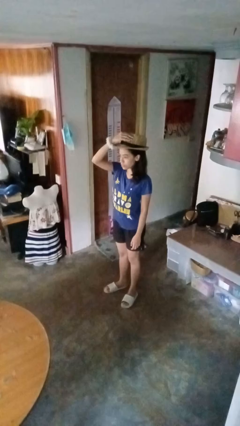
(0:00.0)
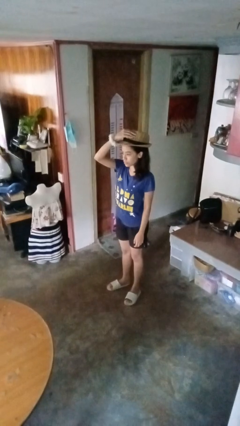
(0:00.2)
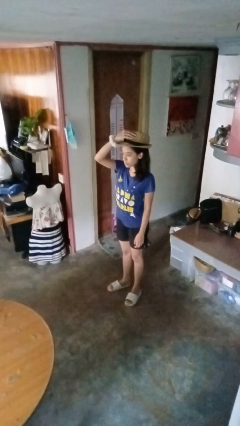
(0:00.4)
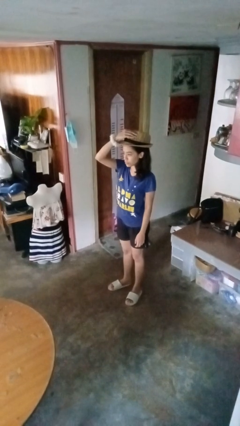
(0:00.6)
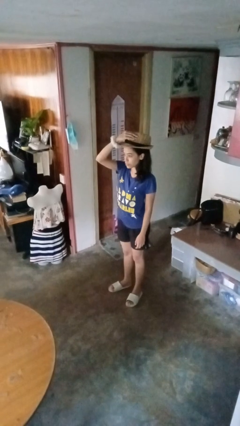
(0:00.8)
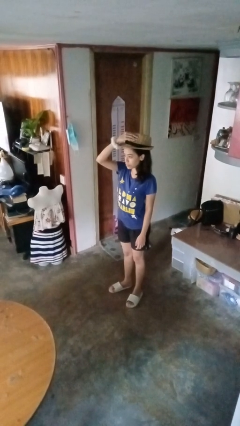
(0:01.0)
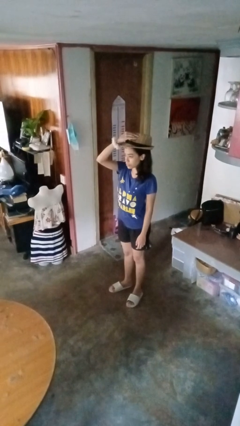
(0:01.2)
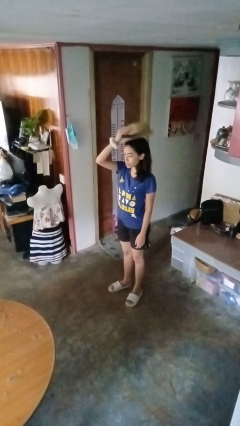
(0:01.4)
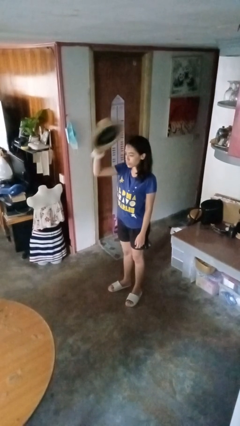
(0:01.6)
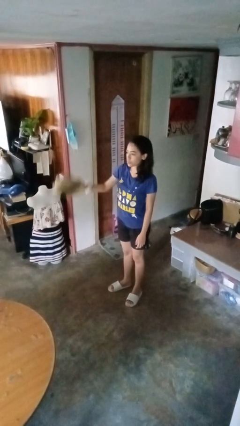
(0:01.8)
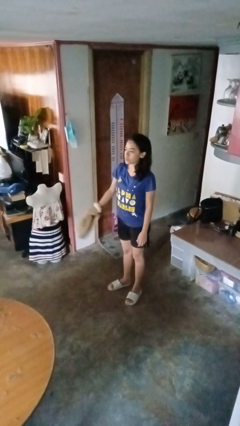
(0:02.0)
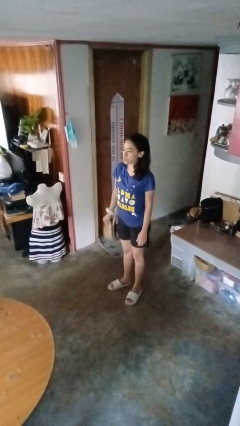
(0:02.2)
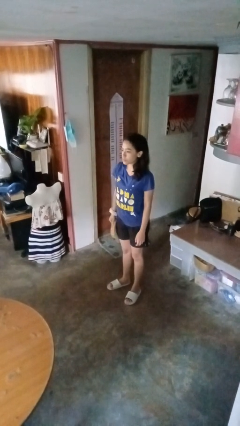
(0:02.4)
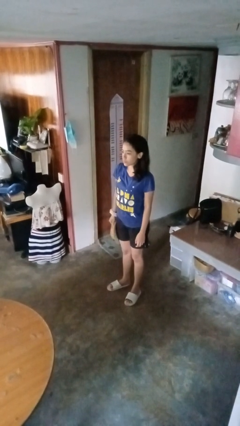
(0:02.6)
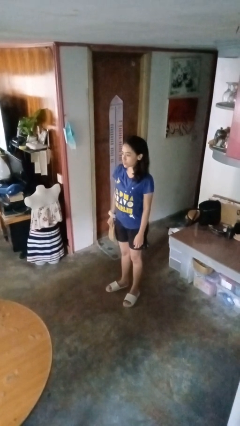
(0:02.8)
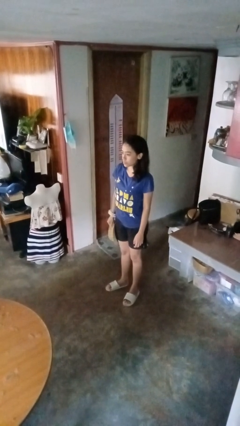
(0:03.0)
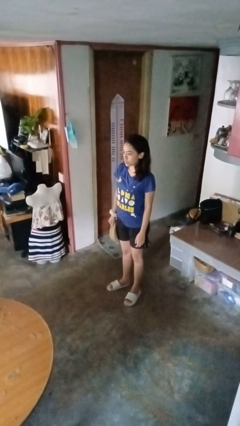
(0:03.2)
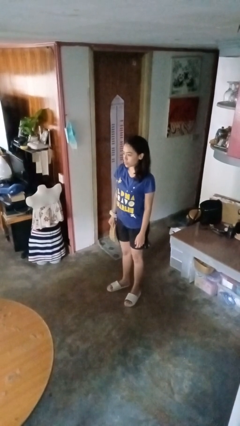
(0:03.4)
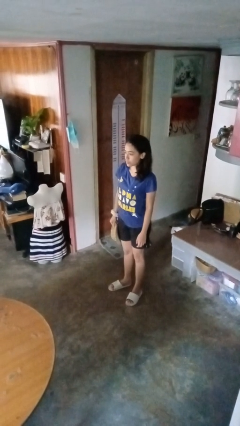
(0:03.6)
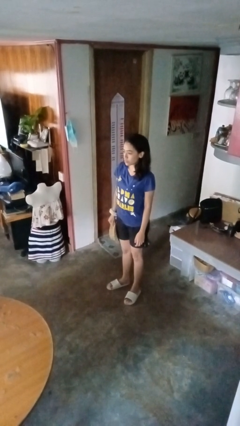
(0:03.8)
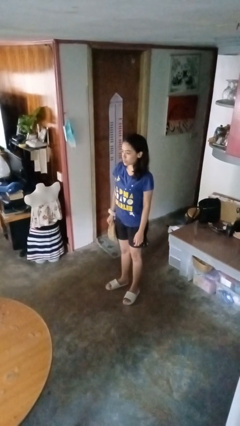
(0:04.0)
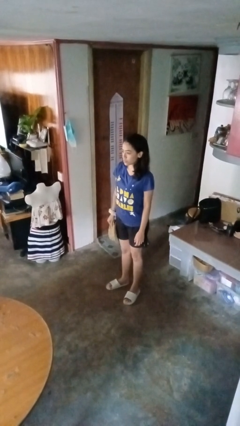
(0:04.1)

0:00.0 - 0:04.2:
person takes off hat

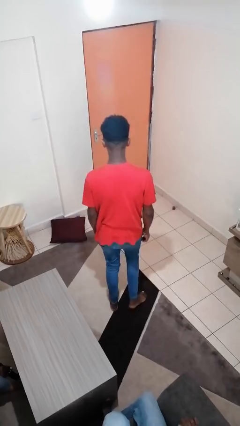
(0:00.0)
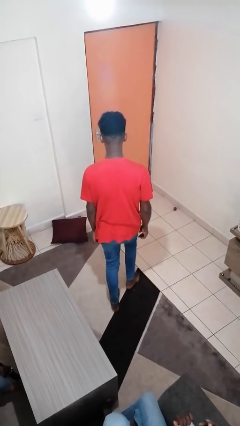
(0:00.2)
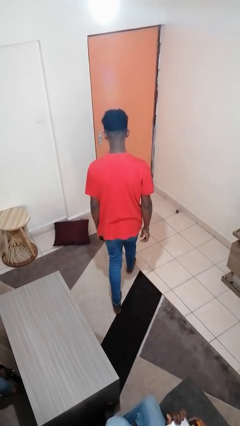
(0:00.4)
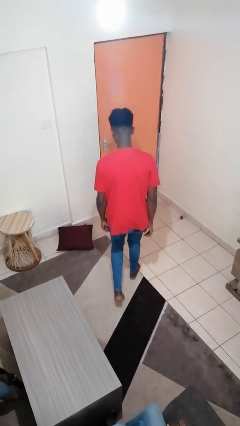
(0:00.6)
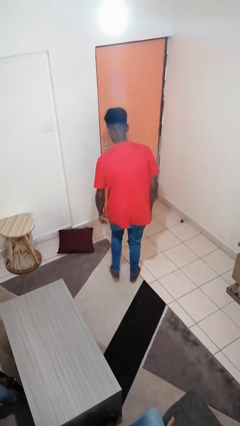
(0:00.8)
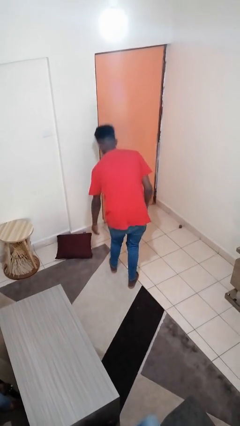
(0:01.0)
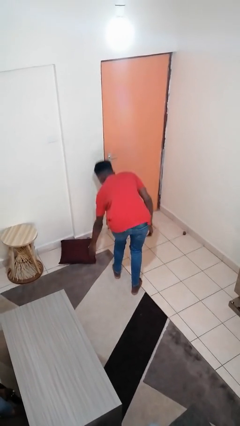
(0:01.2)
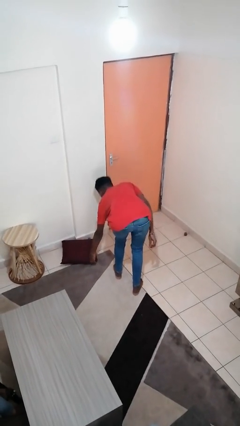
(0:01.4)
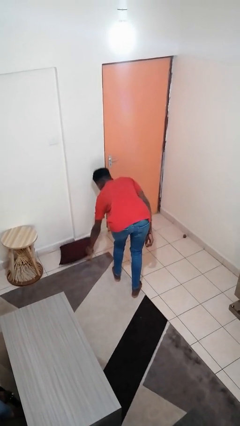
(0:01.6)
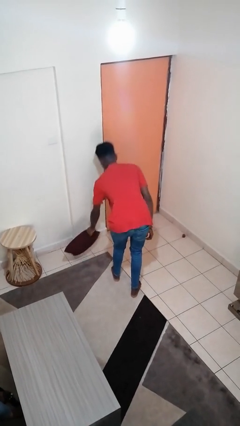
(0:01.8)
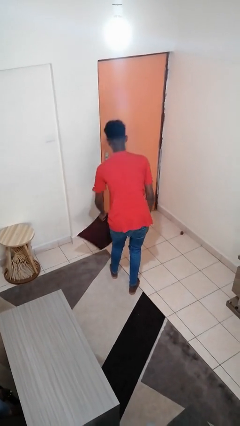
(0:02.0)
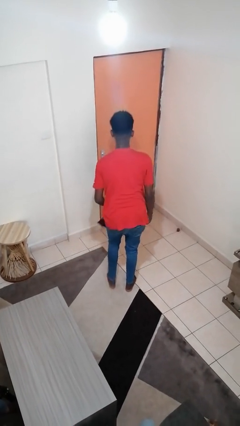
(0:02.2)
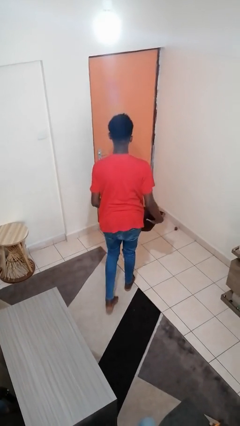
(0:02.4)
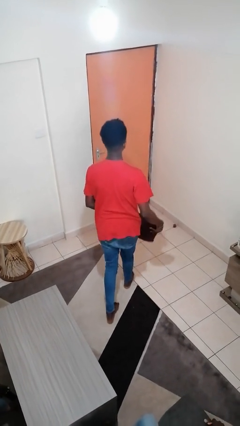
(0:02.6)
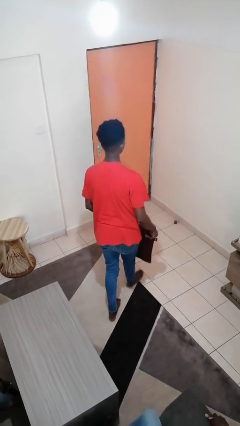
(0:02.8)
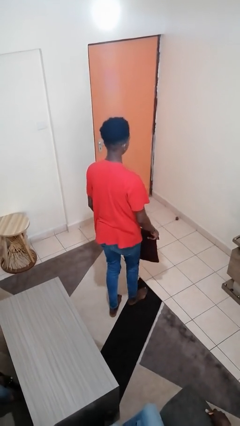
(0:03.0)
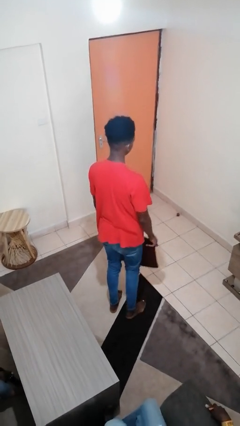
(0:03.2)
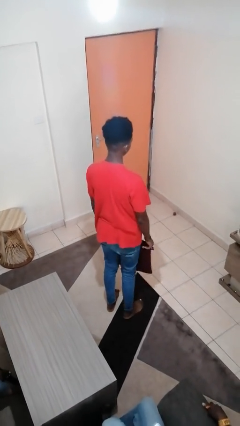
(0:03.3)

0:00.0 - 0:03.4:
person picks up object from floor

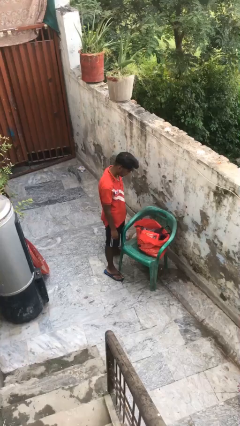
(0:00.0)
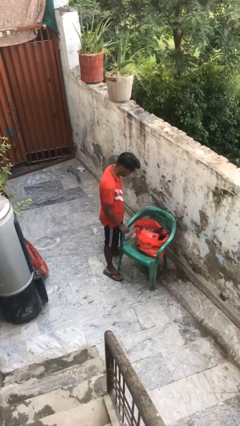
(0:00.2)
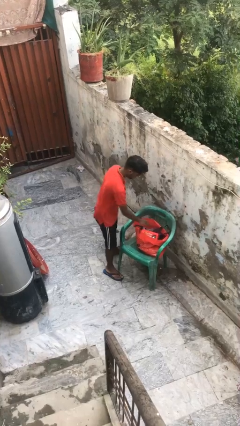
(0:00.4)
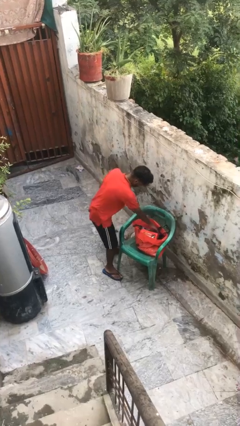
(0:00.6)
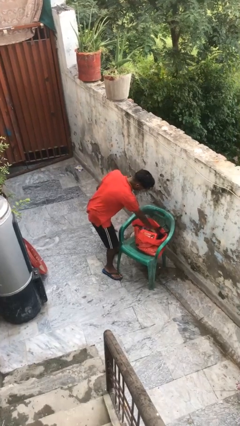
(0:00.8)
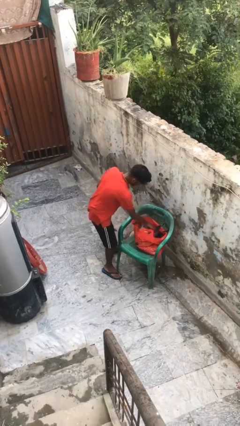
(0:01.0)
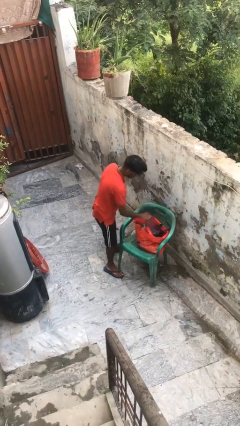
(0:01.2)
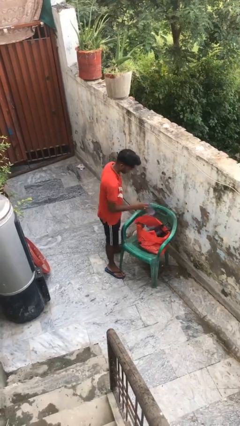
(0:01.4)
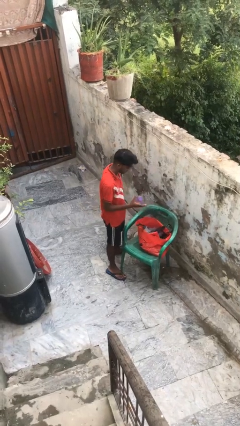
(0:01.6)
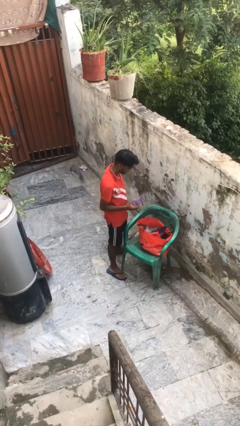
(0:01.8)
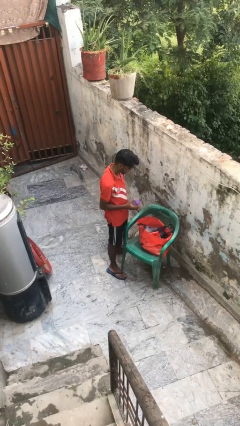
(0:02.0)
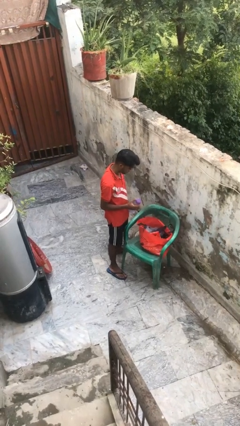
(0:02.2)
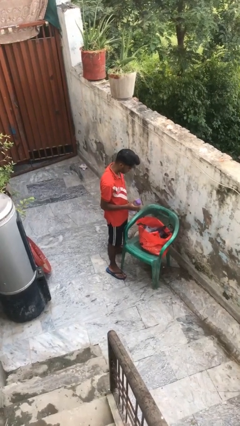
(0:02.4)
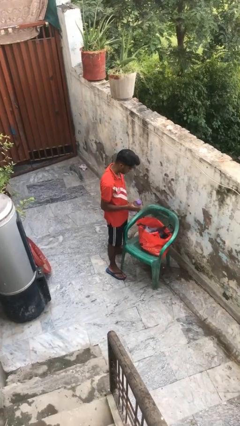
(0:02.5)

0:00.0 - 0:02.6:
person takes object from bag

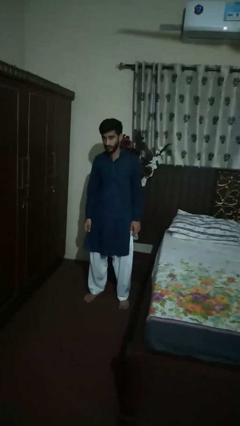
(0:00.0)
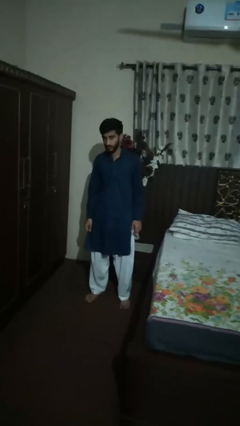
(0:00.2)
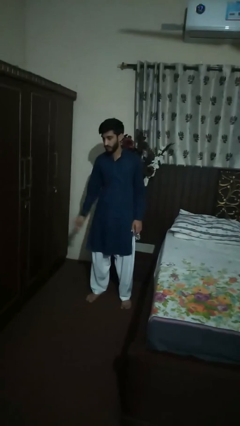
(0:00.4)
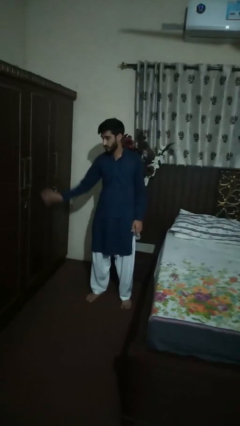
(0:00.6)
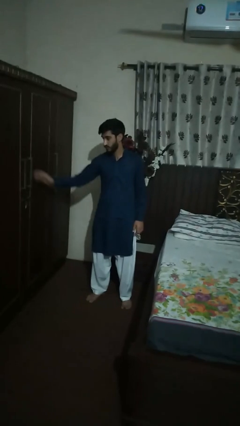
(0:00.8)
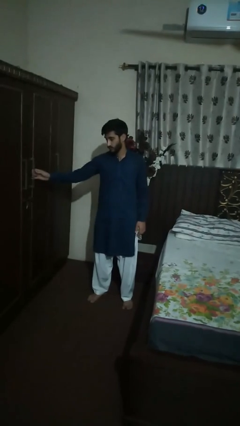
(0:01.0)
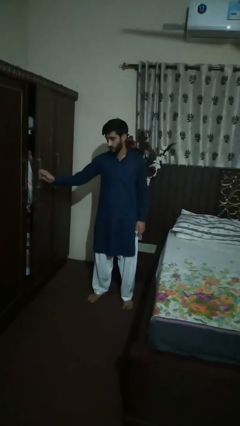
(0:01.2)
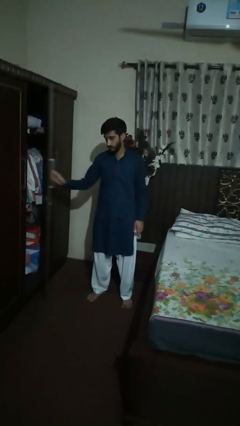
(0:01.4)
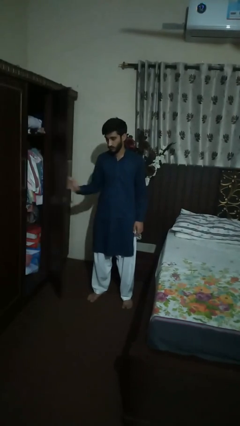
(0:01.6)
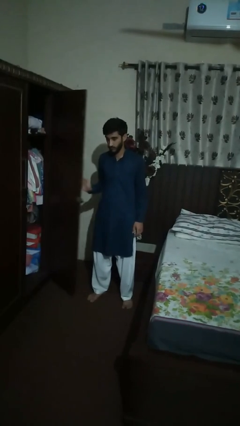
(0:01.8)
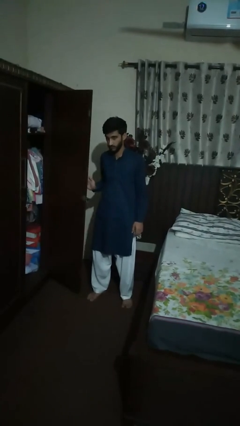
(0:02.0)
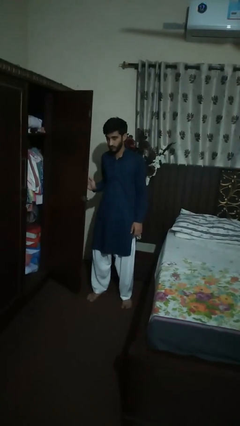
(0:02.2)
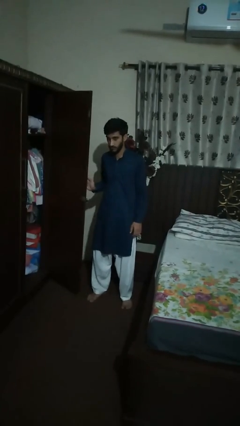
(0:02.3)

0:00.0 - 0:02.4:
person opens dresser drawer

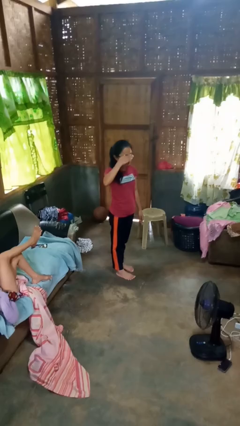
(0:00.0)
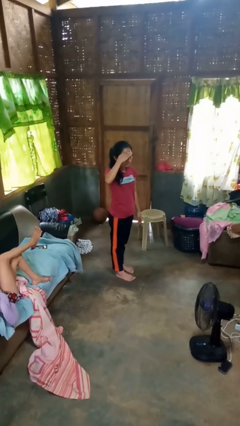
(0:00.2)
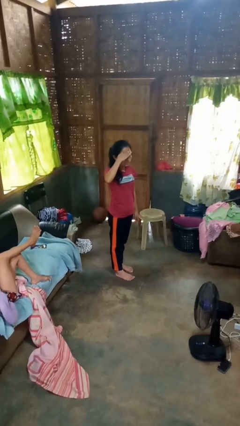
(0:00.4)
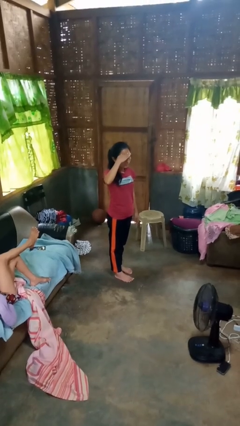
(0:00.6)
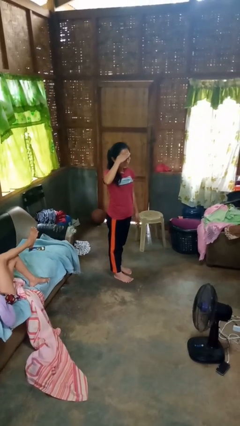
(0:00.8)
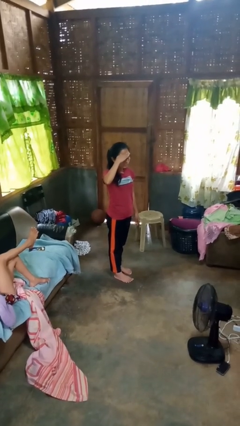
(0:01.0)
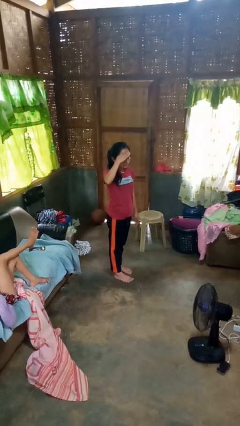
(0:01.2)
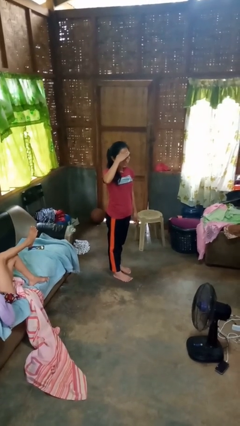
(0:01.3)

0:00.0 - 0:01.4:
person salutes

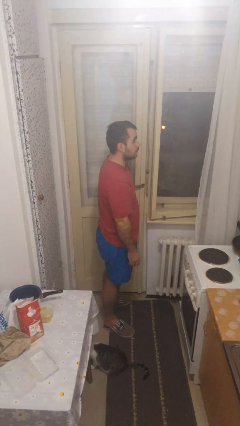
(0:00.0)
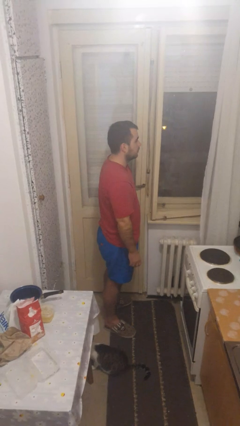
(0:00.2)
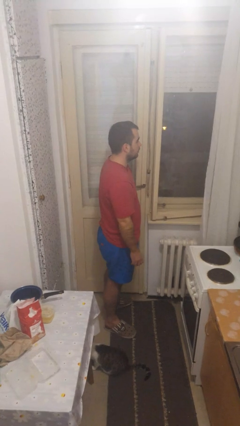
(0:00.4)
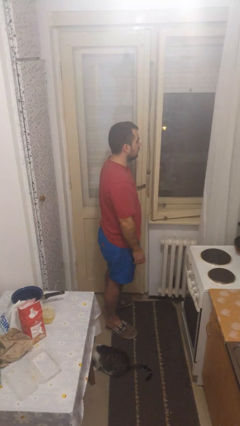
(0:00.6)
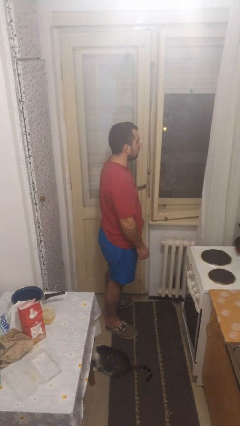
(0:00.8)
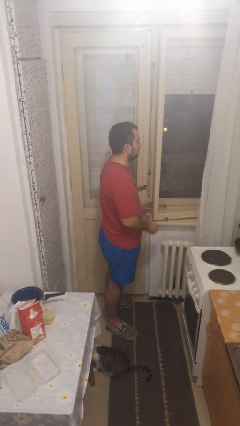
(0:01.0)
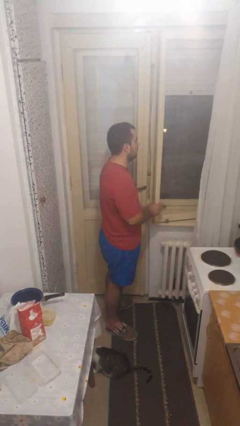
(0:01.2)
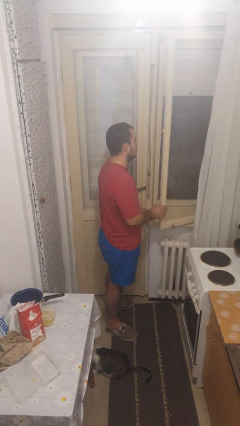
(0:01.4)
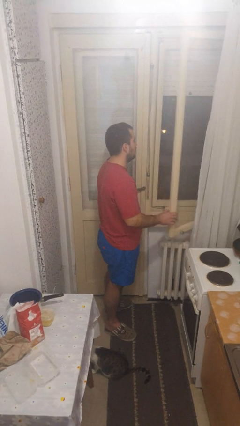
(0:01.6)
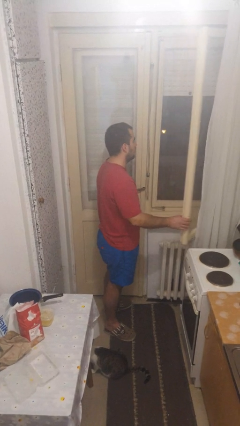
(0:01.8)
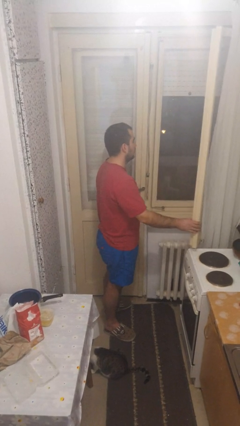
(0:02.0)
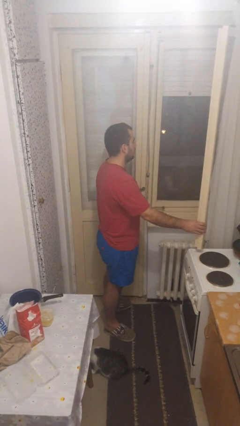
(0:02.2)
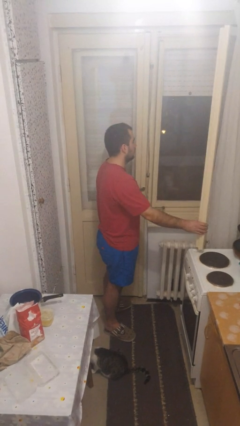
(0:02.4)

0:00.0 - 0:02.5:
person opens home window

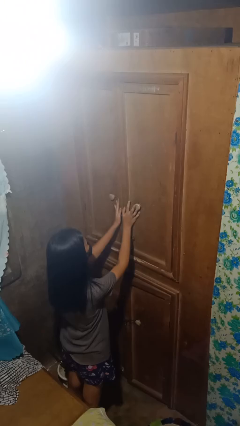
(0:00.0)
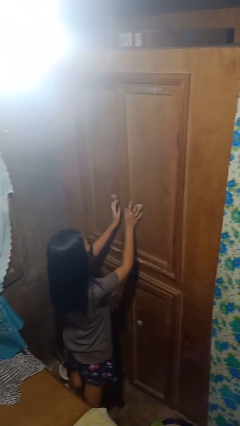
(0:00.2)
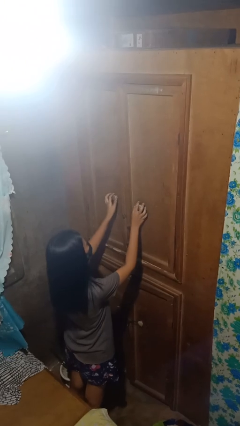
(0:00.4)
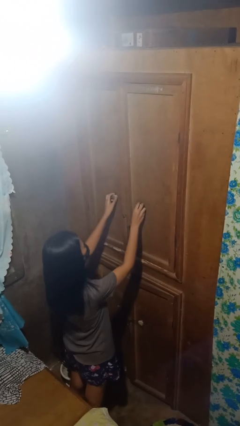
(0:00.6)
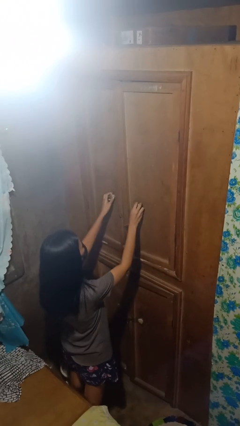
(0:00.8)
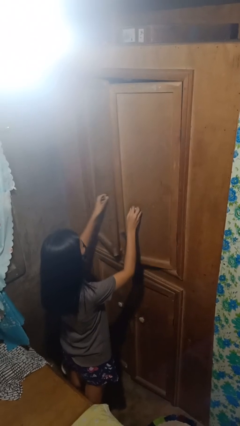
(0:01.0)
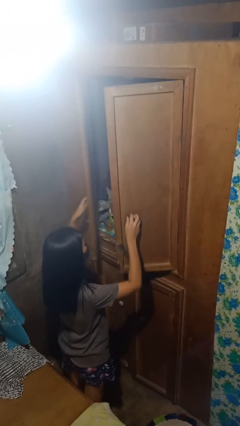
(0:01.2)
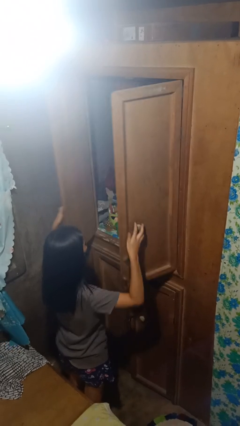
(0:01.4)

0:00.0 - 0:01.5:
person opens closet door
